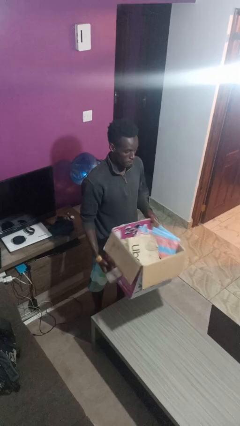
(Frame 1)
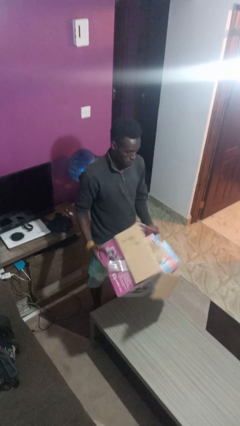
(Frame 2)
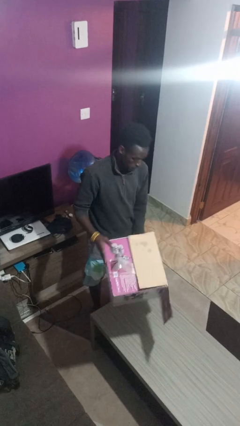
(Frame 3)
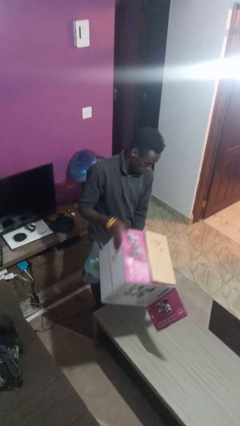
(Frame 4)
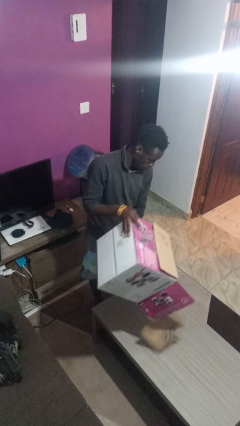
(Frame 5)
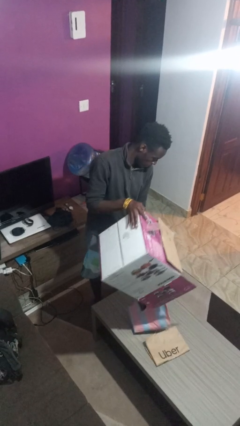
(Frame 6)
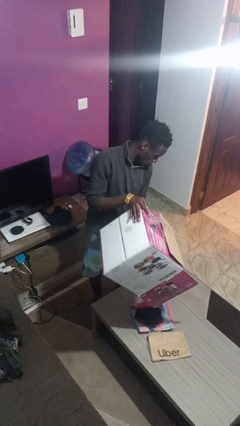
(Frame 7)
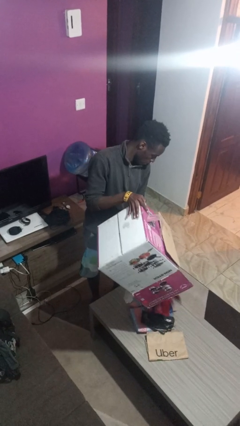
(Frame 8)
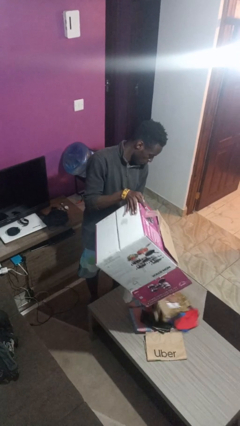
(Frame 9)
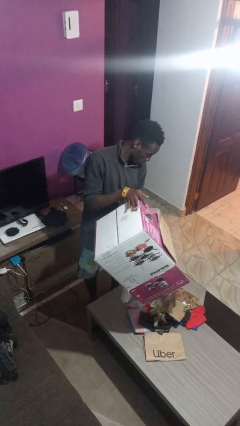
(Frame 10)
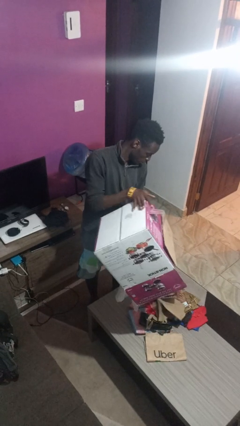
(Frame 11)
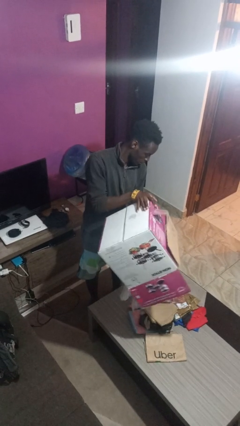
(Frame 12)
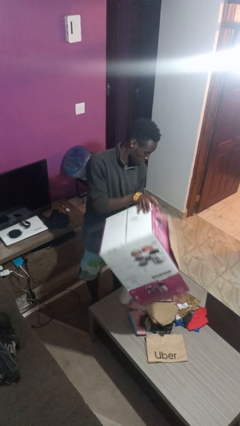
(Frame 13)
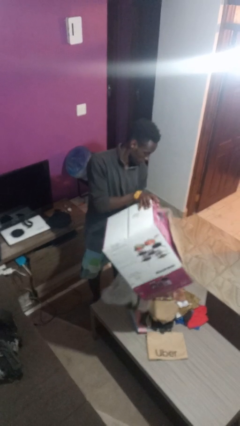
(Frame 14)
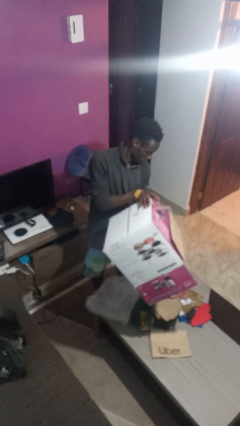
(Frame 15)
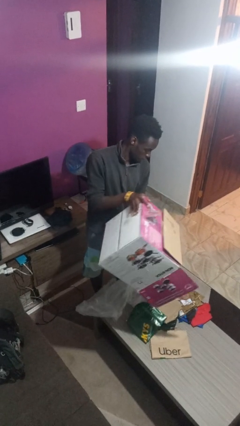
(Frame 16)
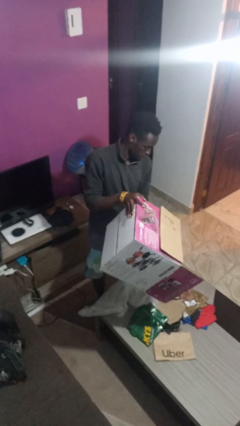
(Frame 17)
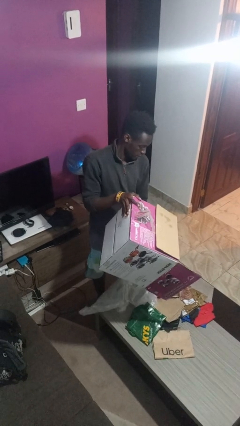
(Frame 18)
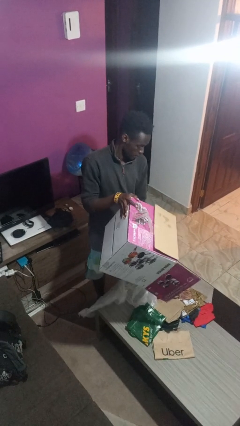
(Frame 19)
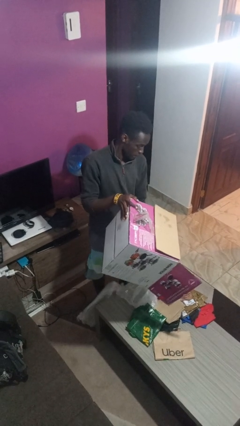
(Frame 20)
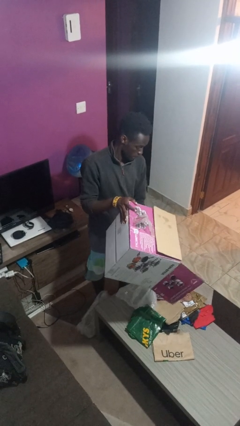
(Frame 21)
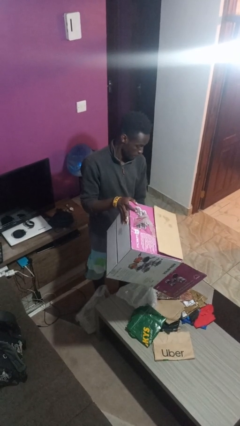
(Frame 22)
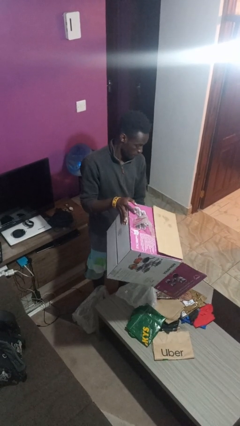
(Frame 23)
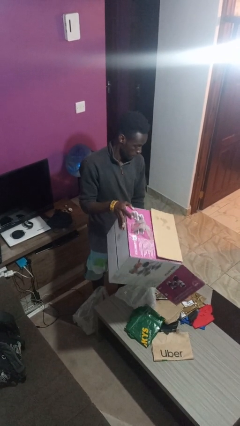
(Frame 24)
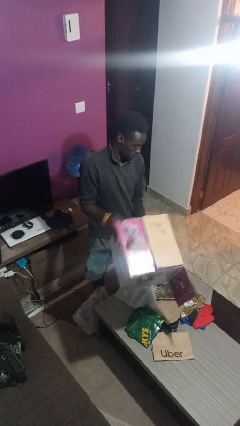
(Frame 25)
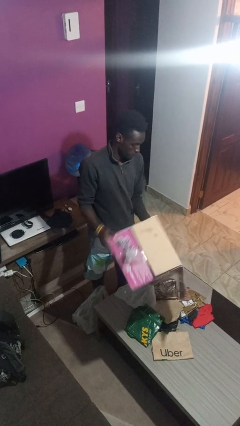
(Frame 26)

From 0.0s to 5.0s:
person unloads box onto table

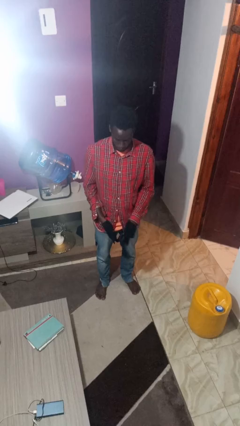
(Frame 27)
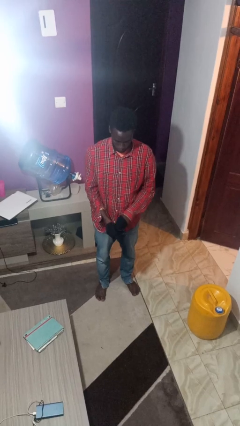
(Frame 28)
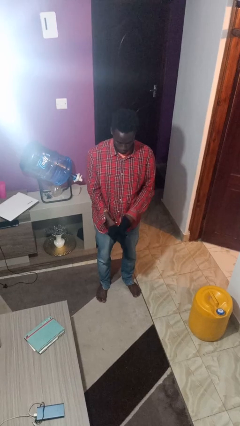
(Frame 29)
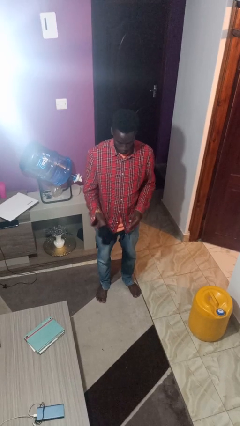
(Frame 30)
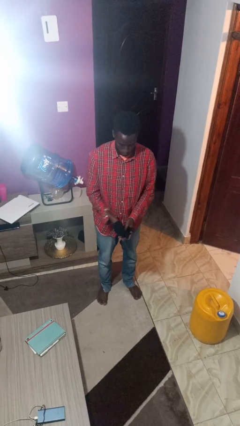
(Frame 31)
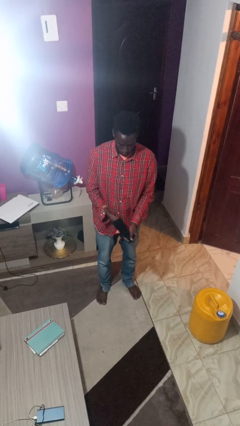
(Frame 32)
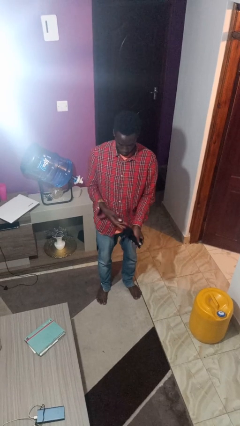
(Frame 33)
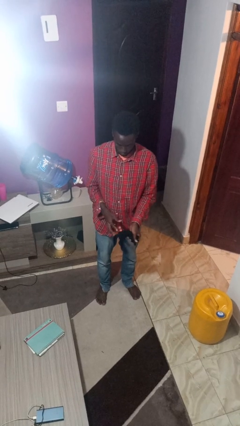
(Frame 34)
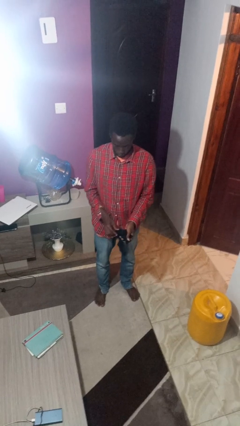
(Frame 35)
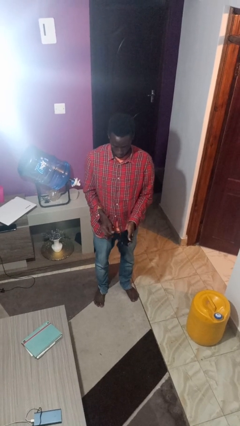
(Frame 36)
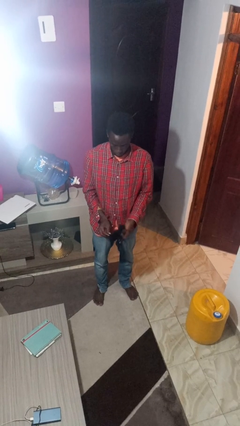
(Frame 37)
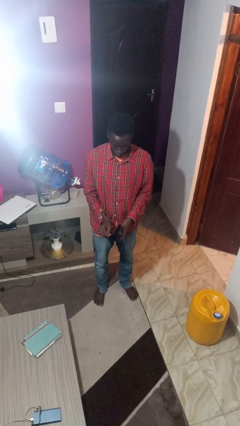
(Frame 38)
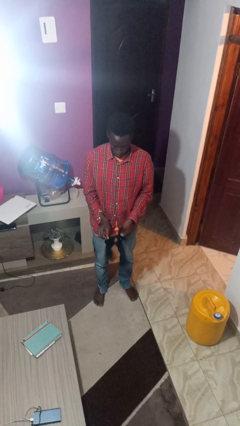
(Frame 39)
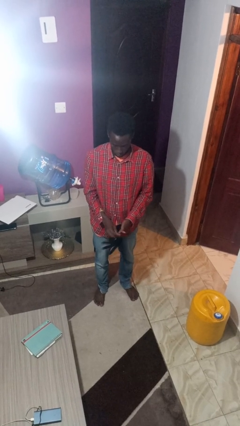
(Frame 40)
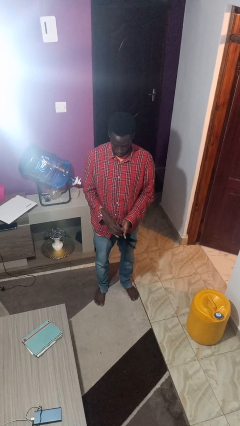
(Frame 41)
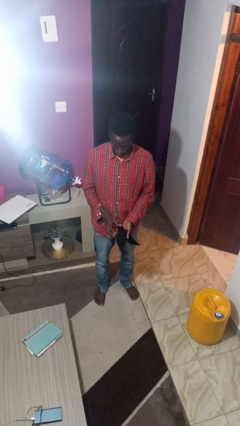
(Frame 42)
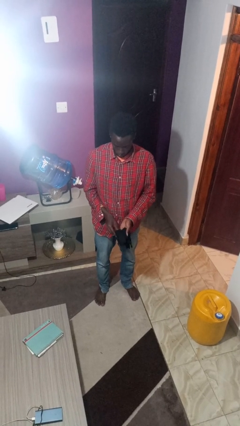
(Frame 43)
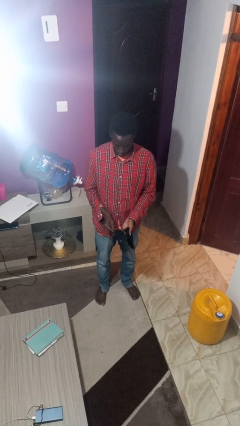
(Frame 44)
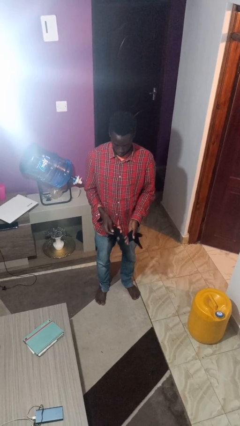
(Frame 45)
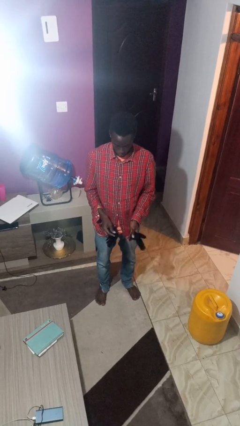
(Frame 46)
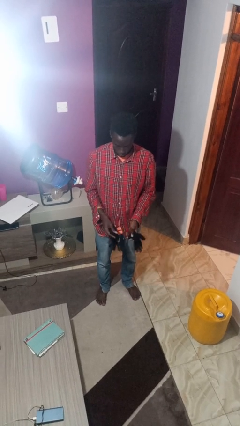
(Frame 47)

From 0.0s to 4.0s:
person takes off gloves

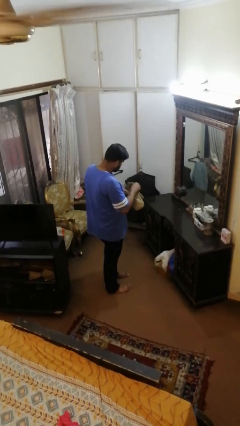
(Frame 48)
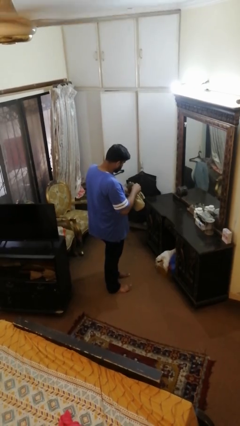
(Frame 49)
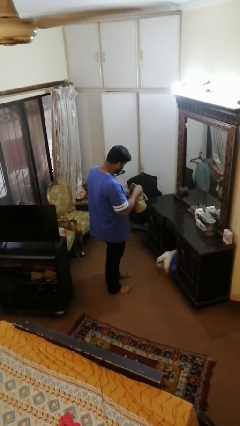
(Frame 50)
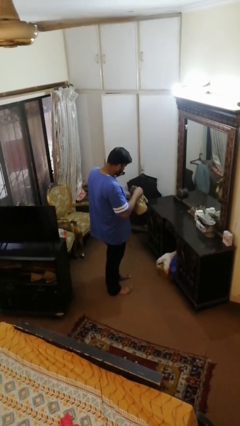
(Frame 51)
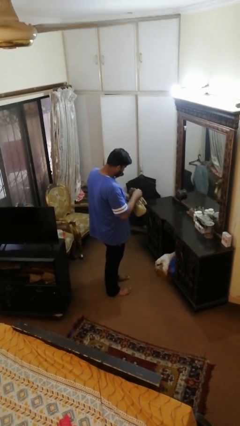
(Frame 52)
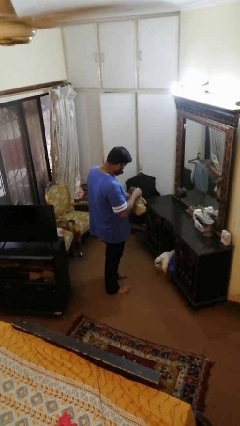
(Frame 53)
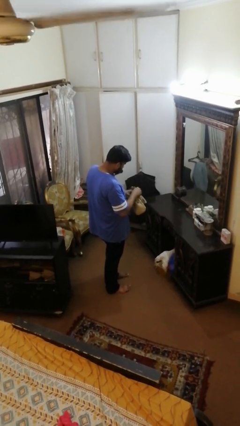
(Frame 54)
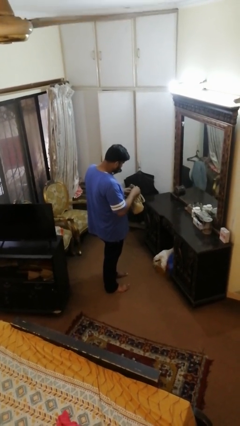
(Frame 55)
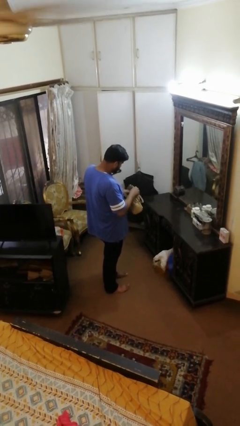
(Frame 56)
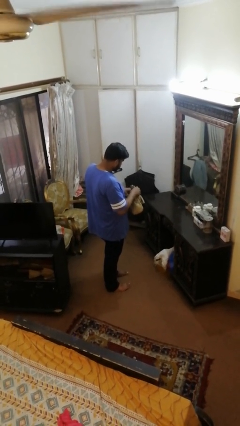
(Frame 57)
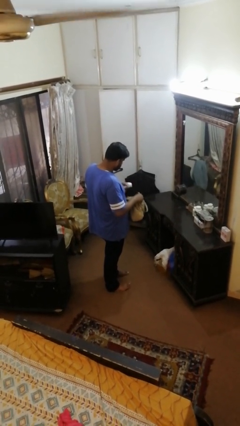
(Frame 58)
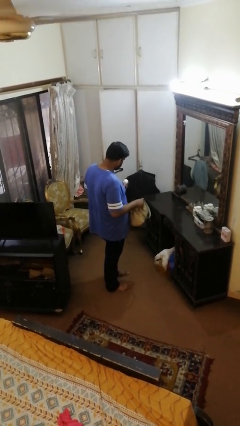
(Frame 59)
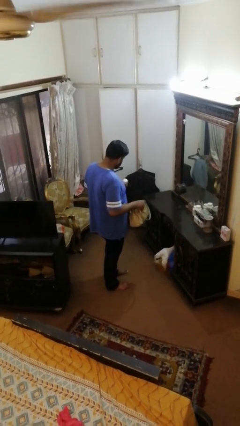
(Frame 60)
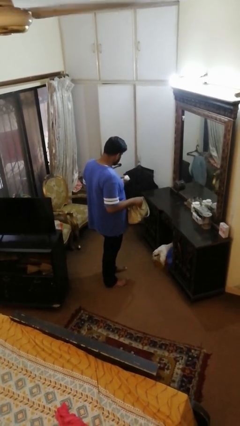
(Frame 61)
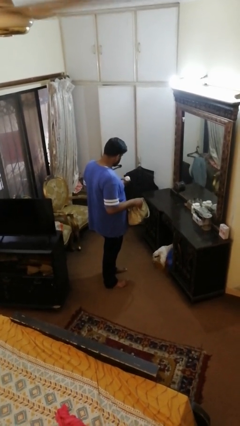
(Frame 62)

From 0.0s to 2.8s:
person takes object from purse

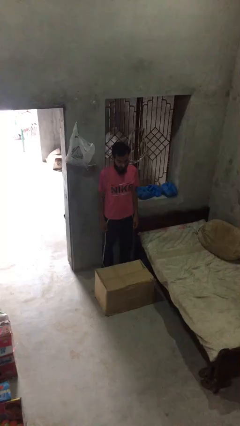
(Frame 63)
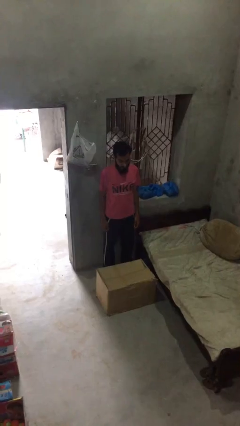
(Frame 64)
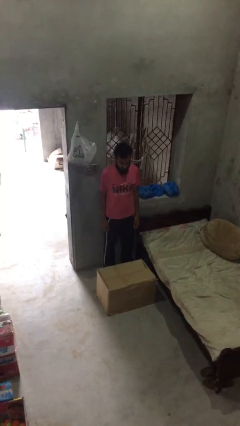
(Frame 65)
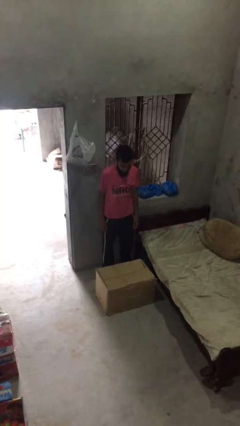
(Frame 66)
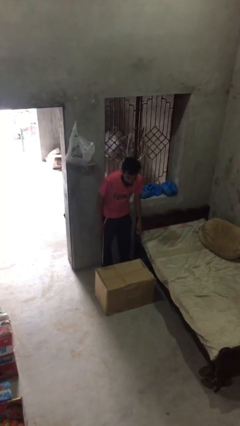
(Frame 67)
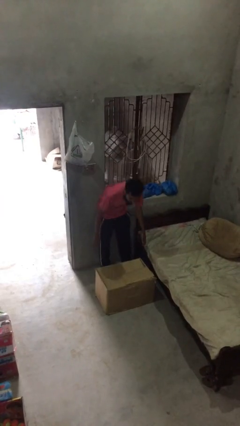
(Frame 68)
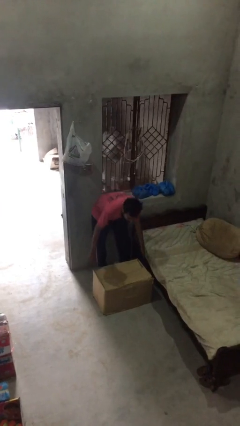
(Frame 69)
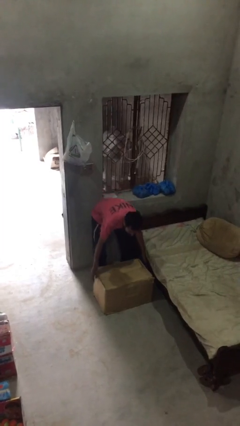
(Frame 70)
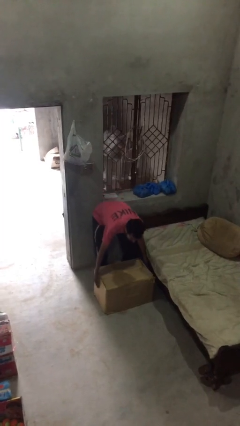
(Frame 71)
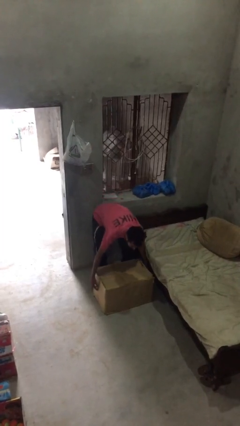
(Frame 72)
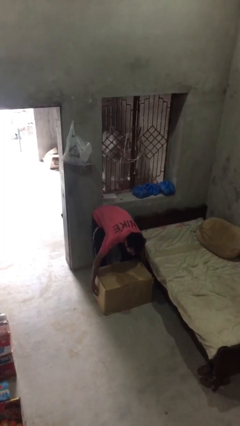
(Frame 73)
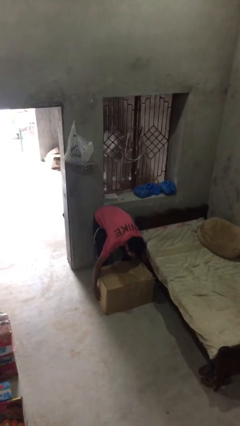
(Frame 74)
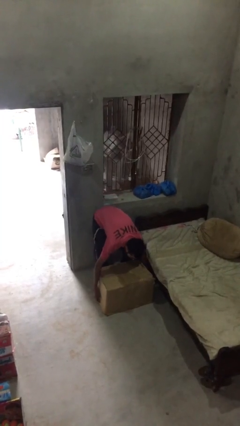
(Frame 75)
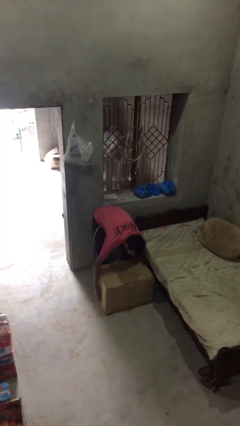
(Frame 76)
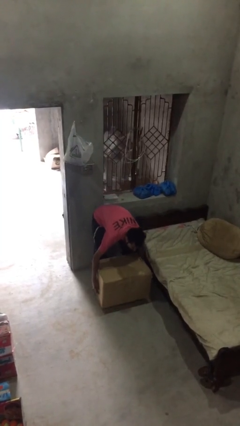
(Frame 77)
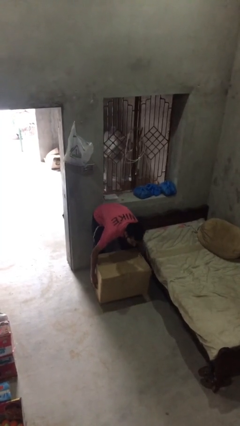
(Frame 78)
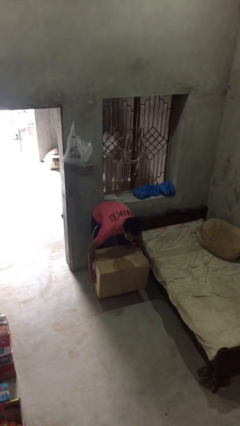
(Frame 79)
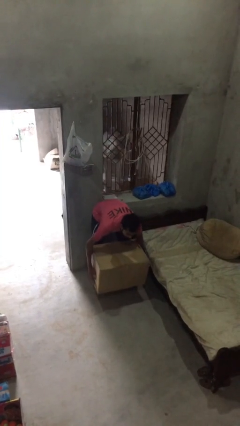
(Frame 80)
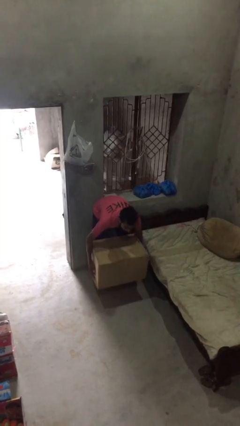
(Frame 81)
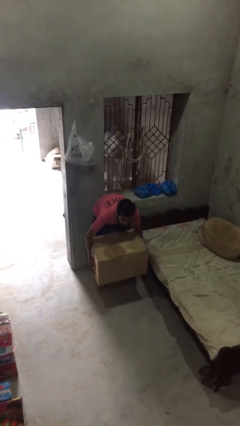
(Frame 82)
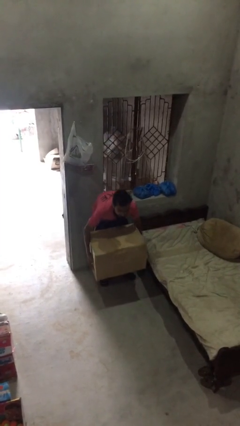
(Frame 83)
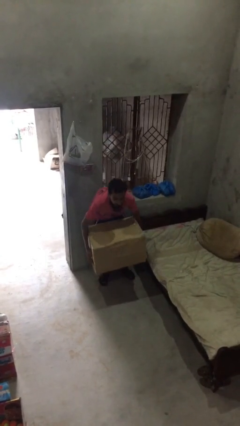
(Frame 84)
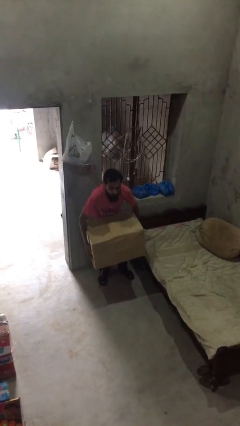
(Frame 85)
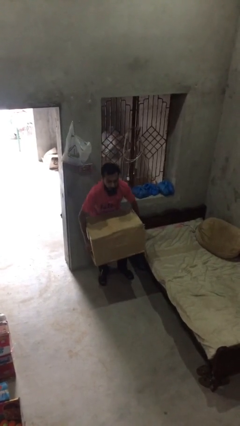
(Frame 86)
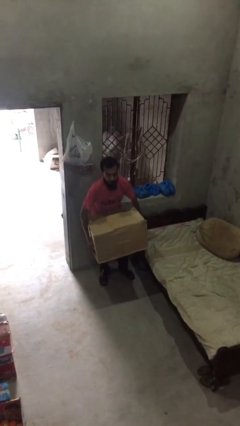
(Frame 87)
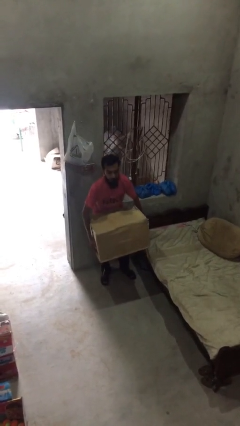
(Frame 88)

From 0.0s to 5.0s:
person picks up object from floor

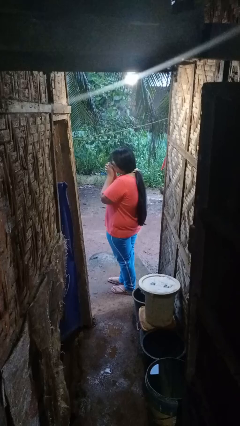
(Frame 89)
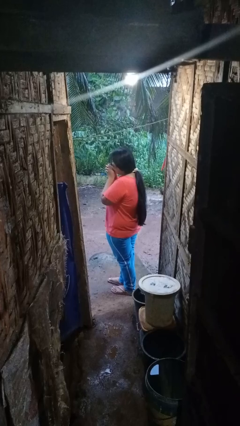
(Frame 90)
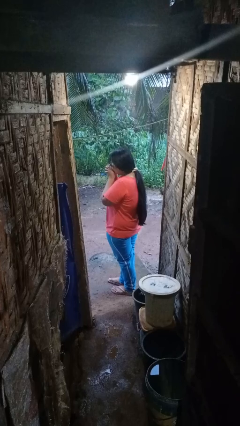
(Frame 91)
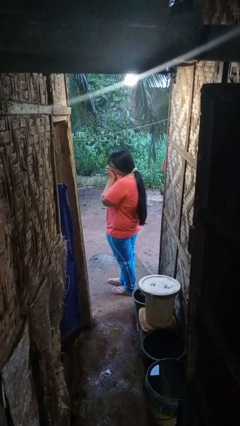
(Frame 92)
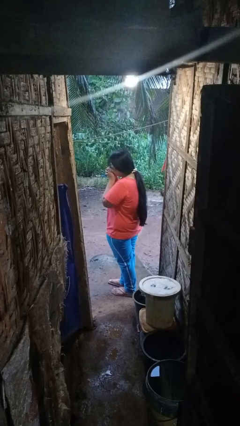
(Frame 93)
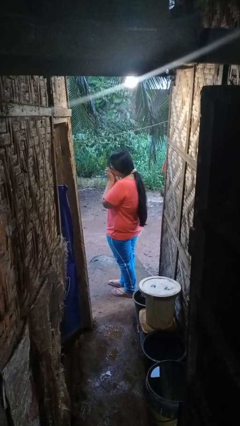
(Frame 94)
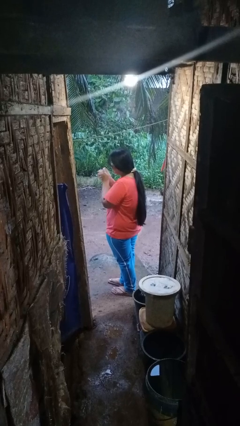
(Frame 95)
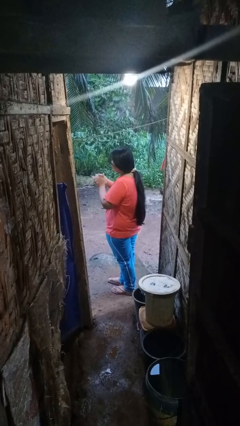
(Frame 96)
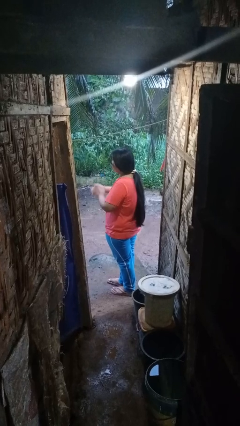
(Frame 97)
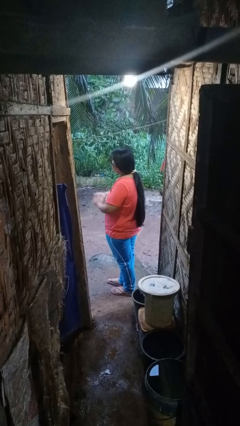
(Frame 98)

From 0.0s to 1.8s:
person blows into hands
